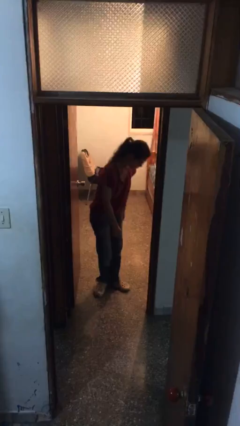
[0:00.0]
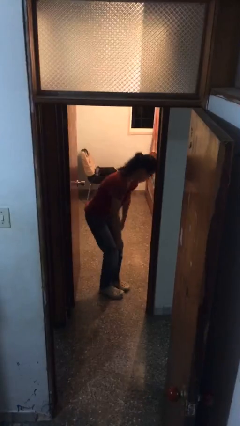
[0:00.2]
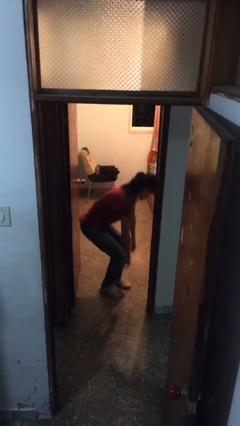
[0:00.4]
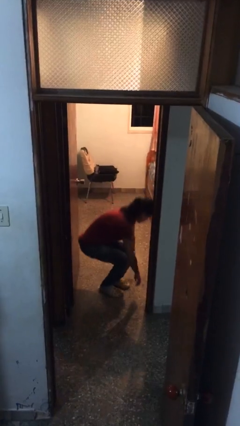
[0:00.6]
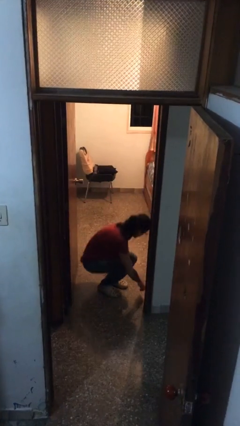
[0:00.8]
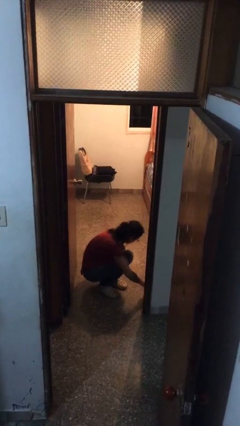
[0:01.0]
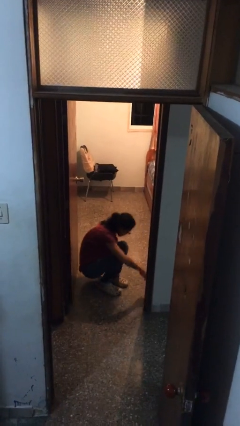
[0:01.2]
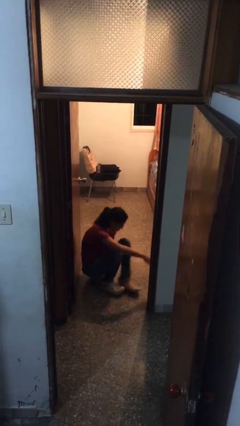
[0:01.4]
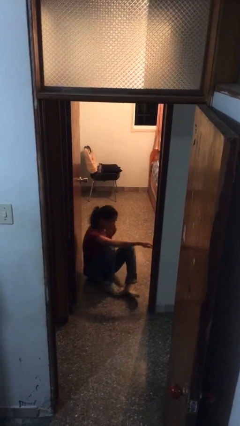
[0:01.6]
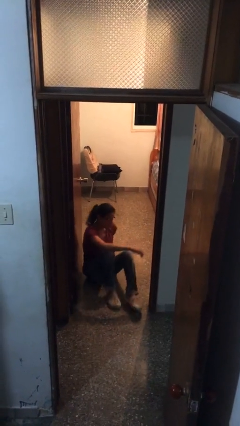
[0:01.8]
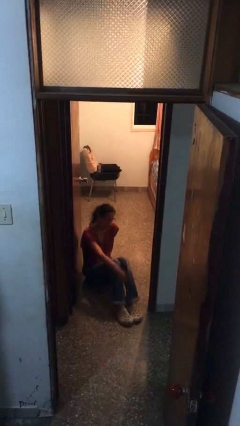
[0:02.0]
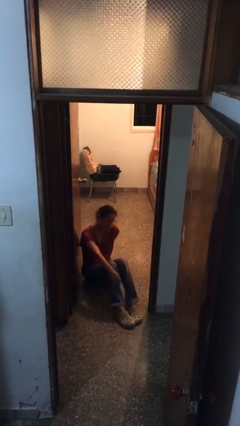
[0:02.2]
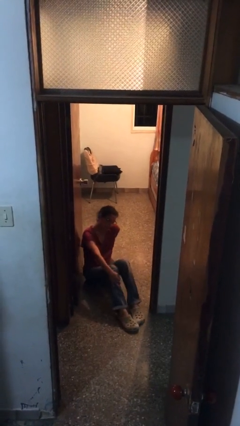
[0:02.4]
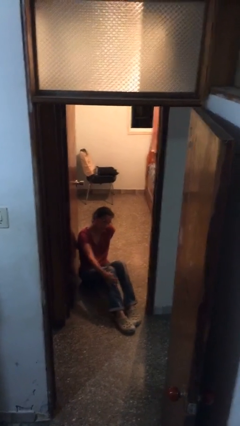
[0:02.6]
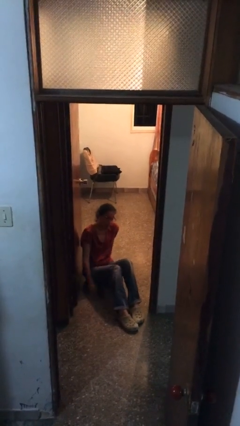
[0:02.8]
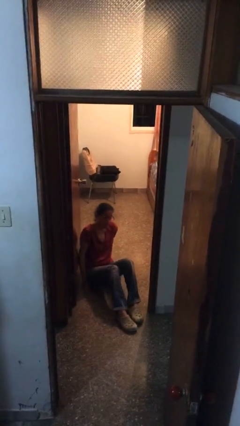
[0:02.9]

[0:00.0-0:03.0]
person sits down

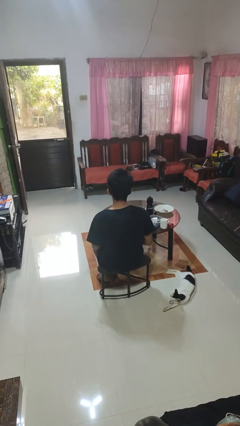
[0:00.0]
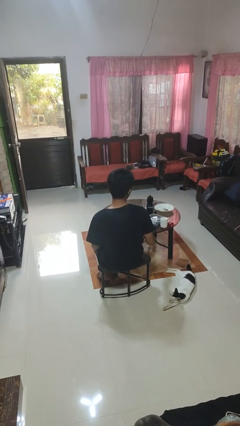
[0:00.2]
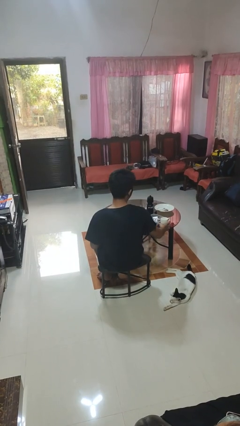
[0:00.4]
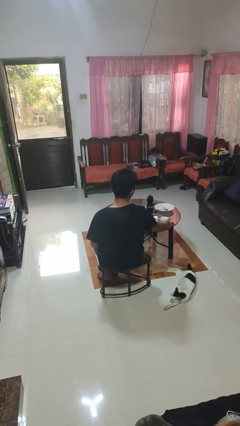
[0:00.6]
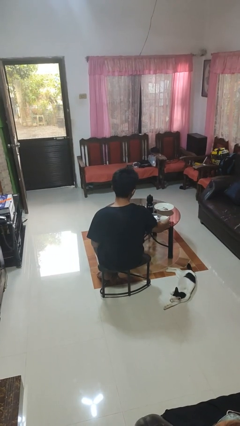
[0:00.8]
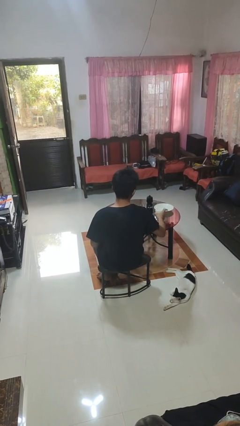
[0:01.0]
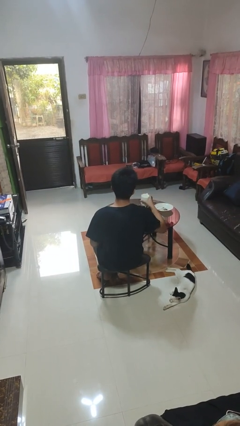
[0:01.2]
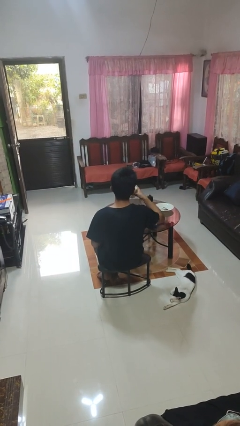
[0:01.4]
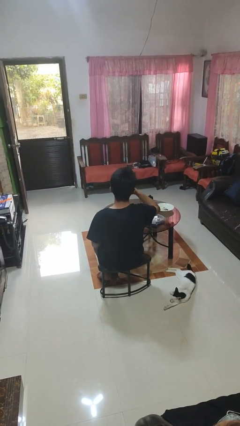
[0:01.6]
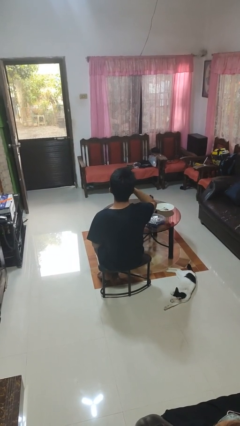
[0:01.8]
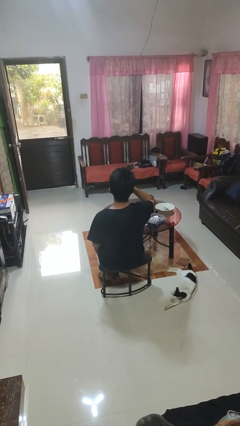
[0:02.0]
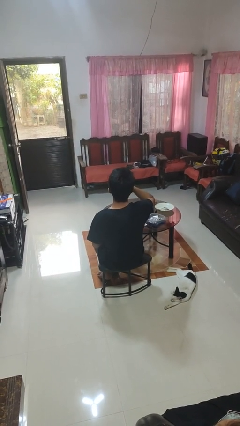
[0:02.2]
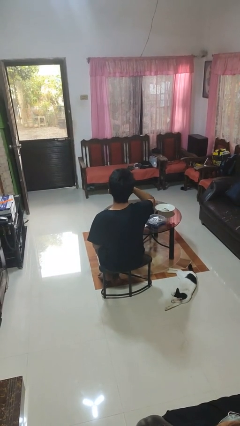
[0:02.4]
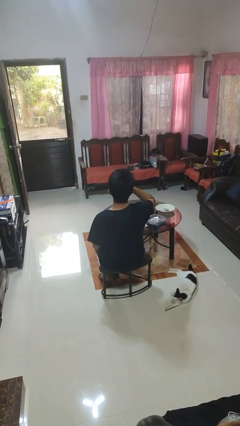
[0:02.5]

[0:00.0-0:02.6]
person drinks from cup

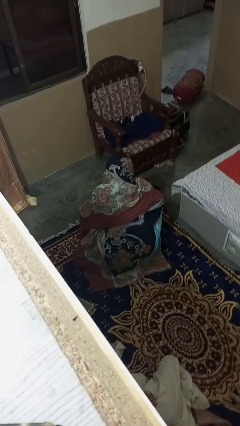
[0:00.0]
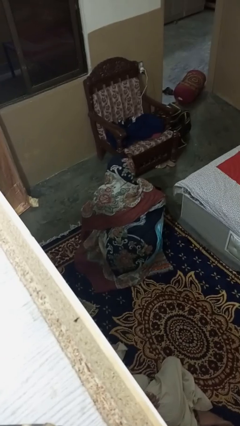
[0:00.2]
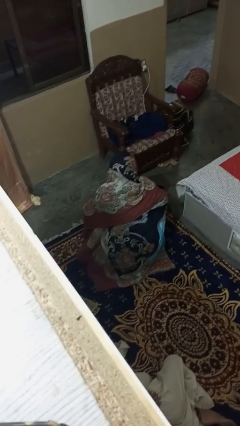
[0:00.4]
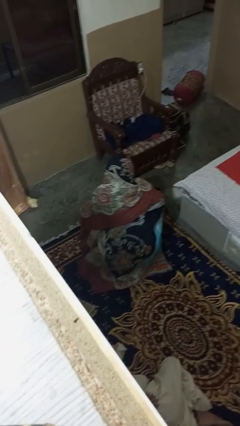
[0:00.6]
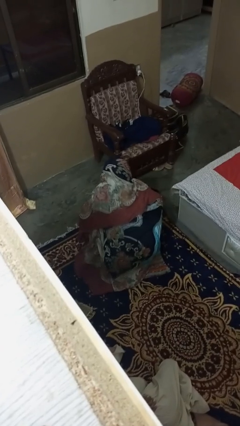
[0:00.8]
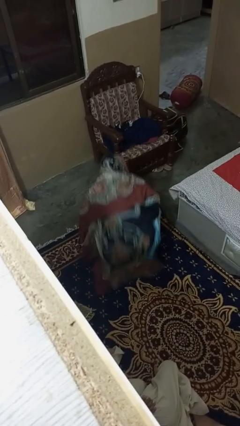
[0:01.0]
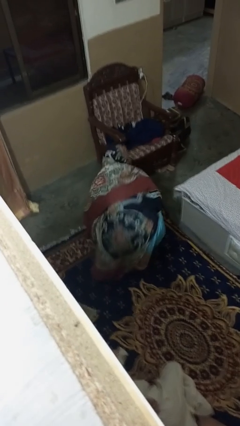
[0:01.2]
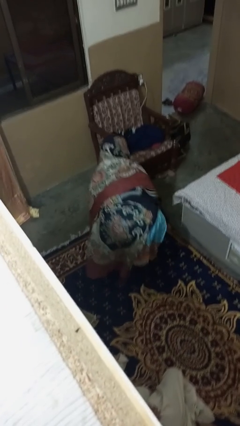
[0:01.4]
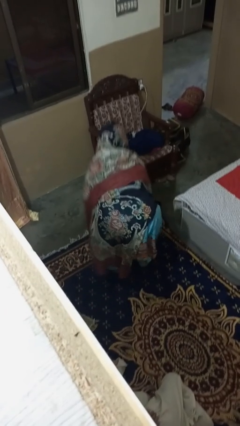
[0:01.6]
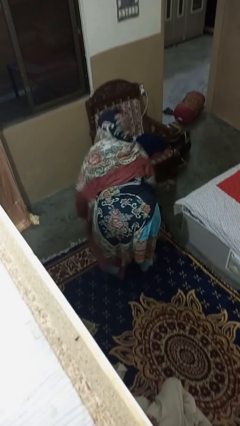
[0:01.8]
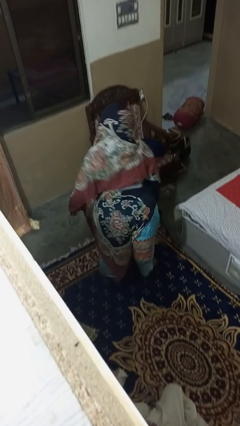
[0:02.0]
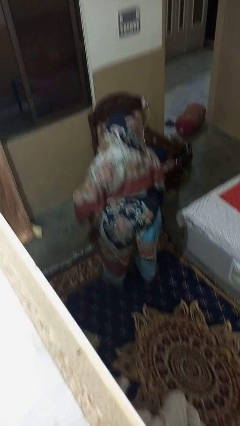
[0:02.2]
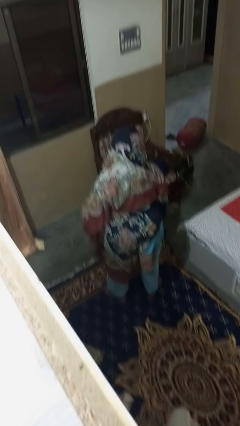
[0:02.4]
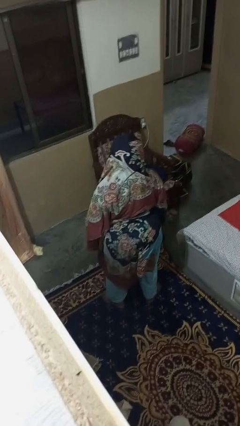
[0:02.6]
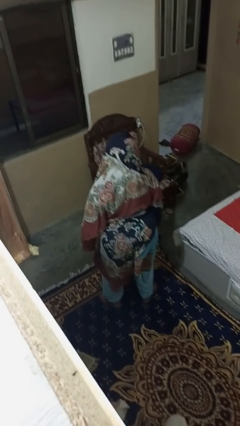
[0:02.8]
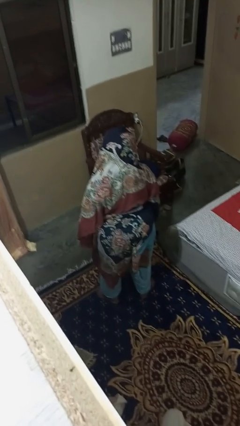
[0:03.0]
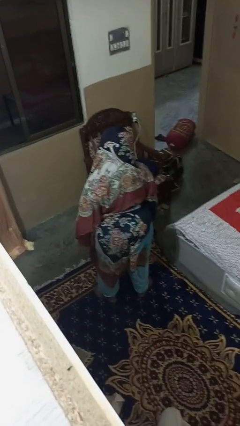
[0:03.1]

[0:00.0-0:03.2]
person stands up

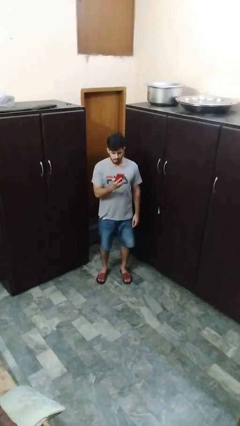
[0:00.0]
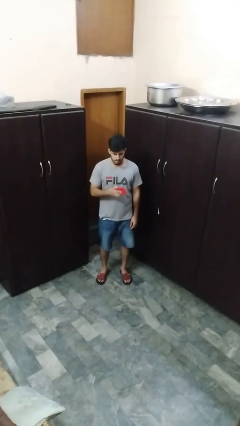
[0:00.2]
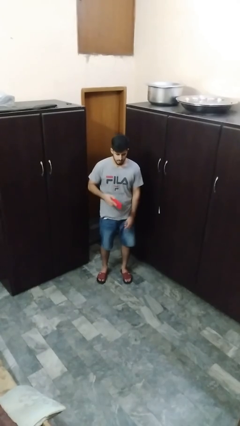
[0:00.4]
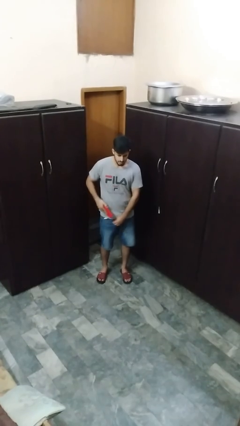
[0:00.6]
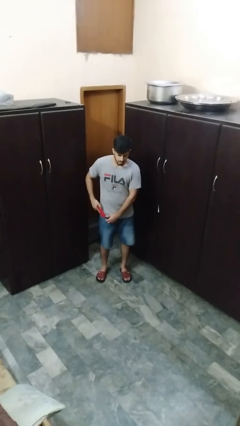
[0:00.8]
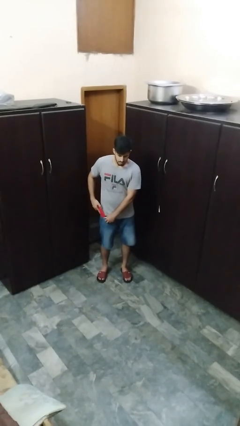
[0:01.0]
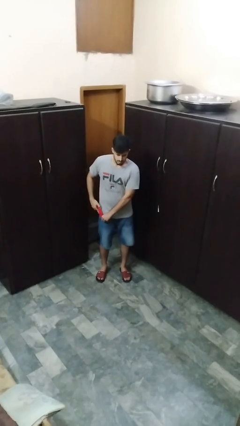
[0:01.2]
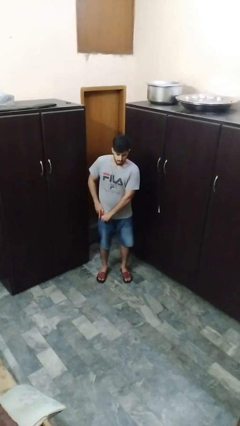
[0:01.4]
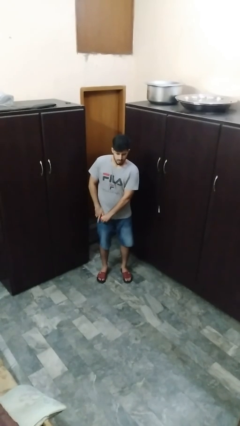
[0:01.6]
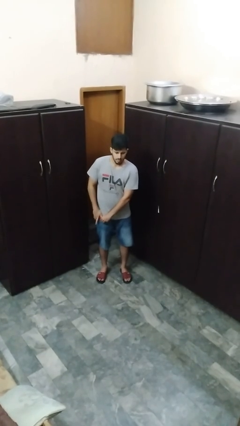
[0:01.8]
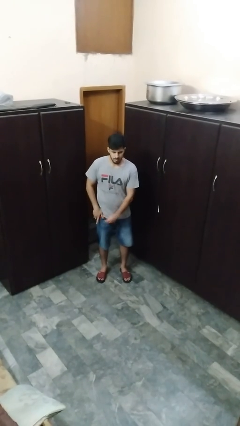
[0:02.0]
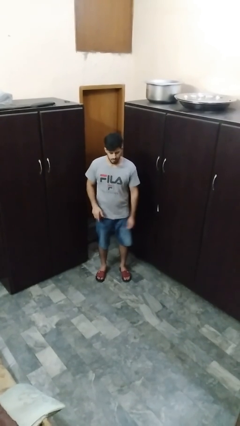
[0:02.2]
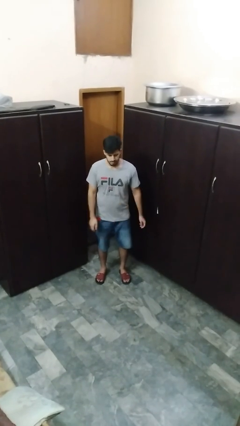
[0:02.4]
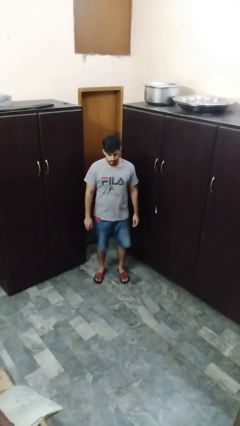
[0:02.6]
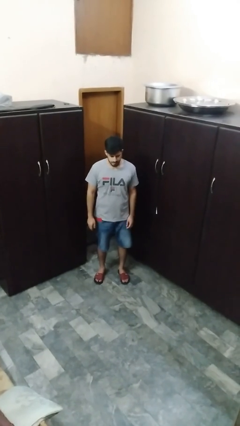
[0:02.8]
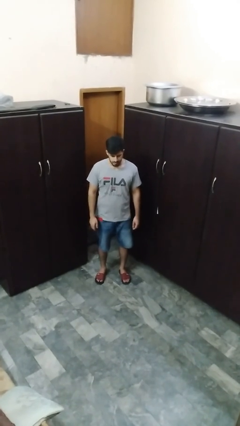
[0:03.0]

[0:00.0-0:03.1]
person puts phone into pocket

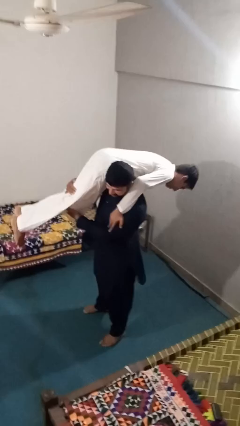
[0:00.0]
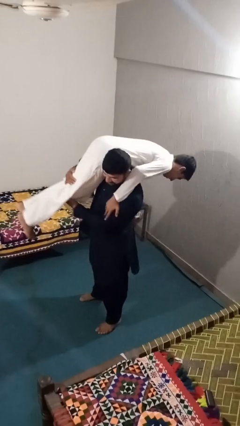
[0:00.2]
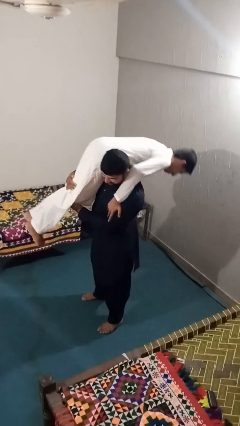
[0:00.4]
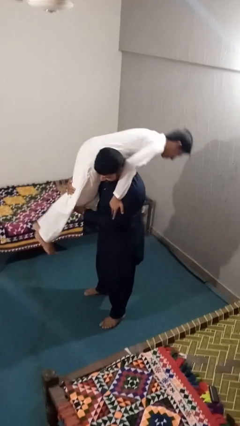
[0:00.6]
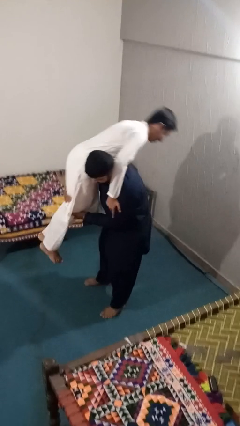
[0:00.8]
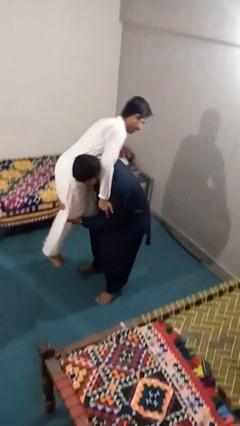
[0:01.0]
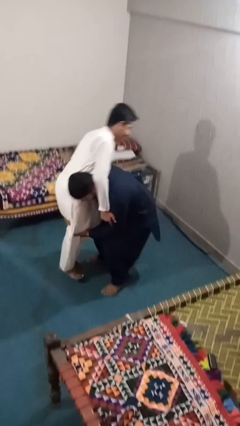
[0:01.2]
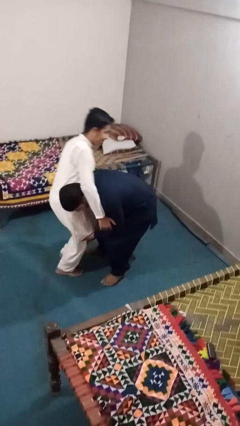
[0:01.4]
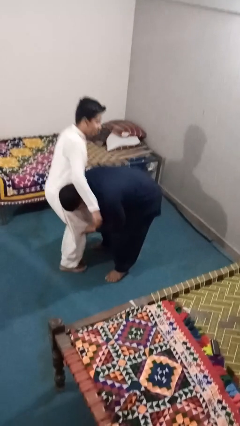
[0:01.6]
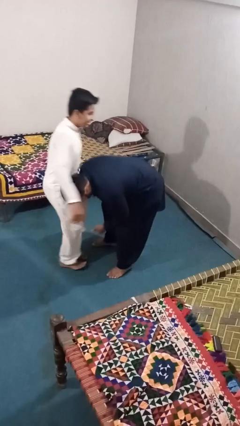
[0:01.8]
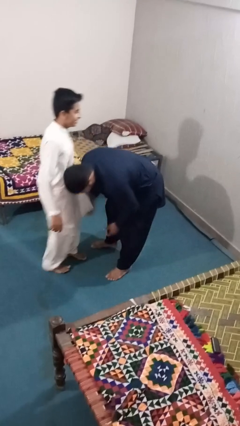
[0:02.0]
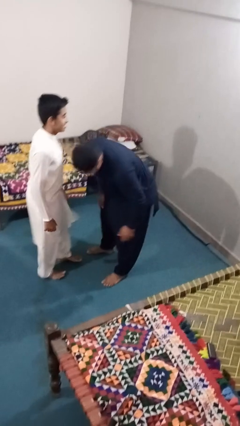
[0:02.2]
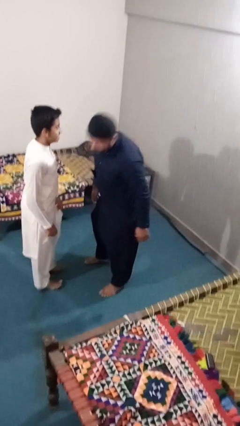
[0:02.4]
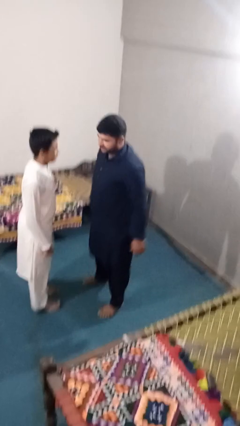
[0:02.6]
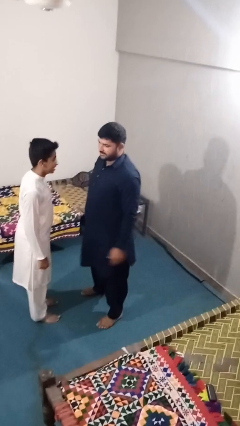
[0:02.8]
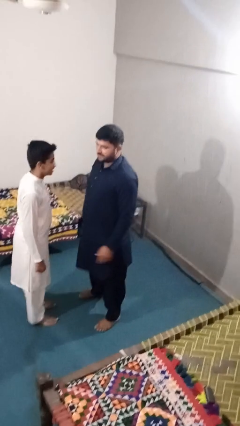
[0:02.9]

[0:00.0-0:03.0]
person puts down person

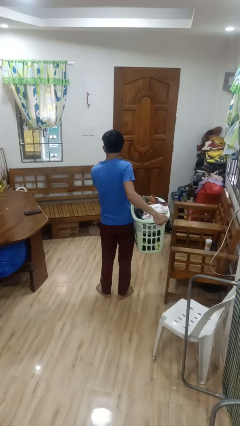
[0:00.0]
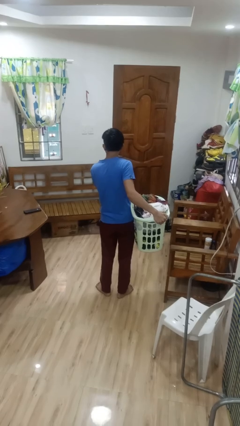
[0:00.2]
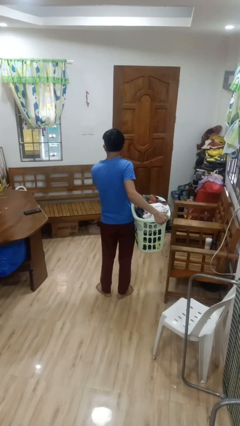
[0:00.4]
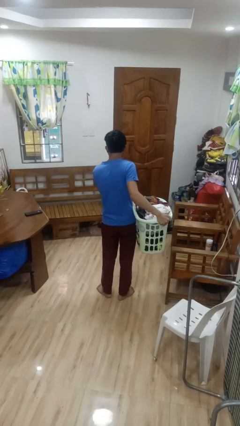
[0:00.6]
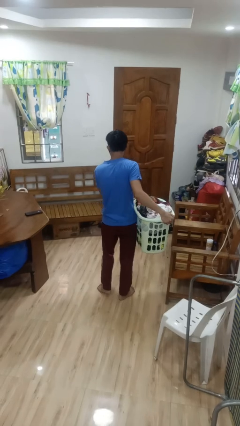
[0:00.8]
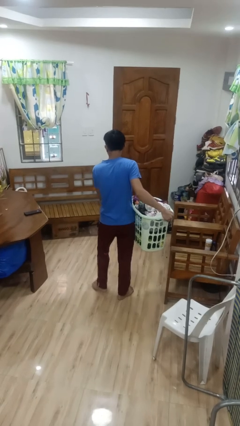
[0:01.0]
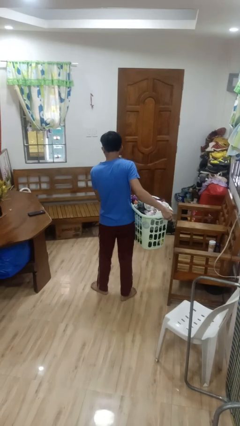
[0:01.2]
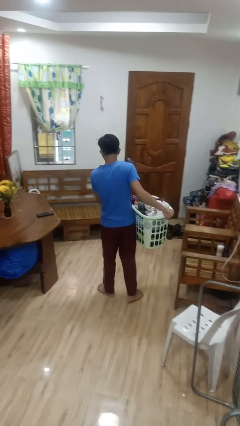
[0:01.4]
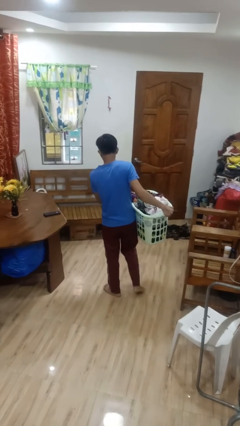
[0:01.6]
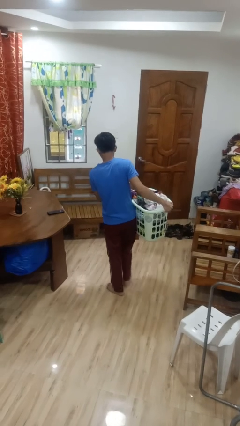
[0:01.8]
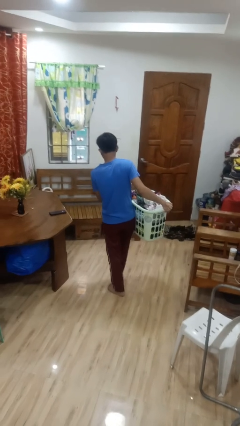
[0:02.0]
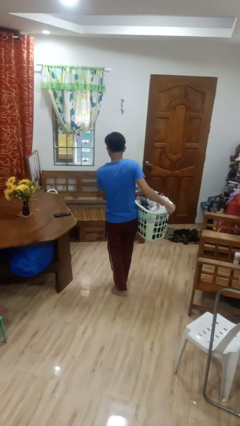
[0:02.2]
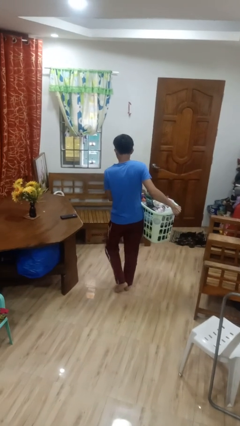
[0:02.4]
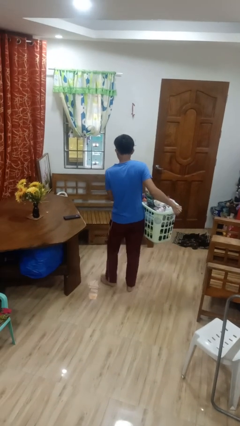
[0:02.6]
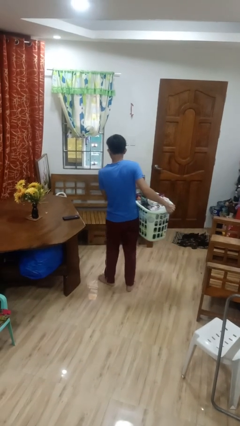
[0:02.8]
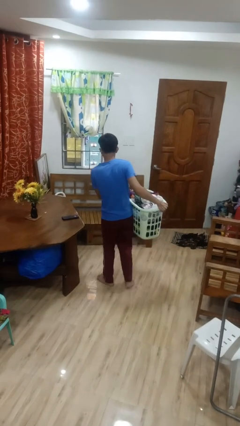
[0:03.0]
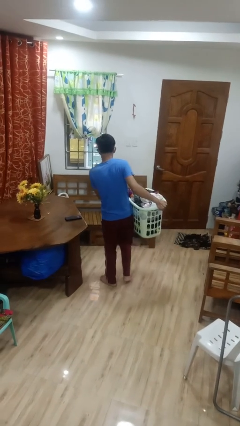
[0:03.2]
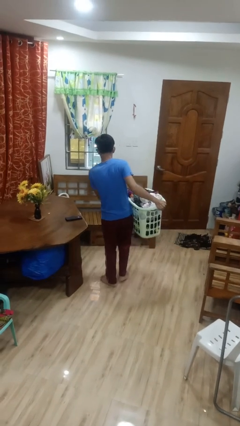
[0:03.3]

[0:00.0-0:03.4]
person carries laundry basket
